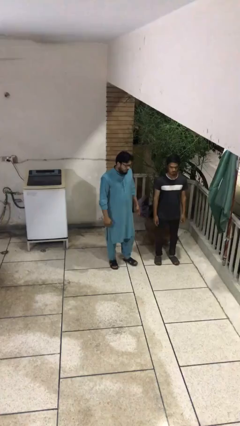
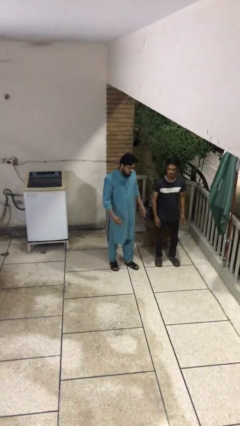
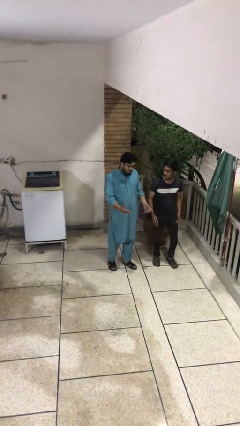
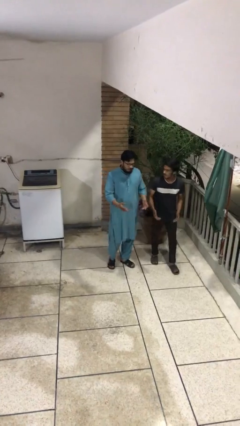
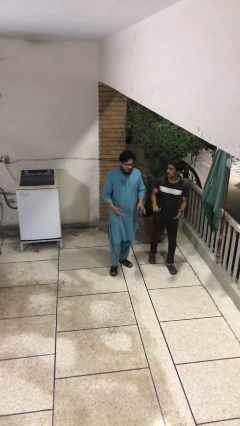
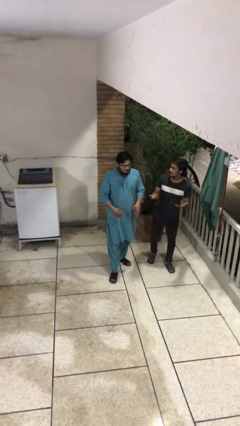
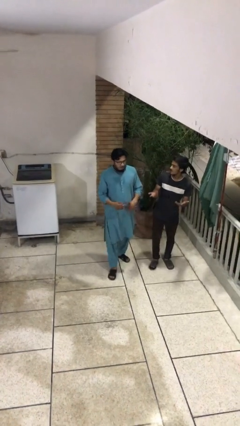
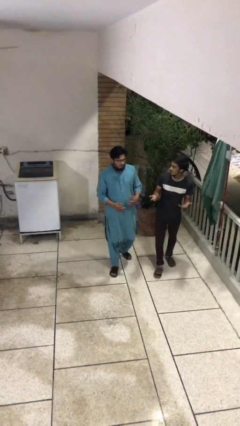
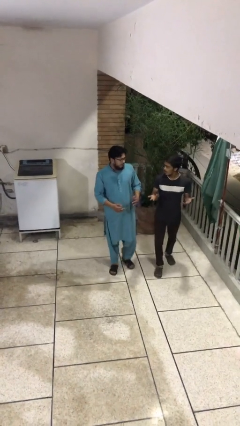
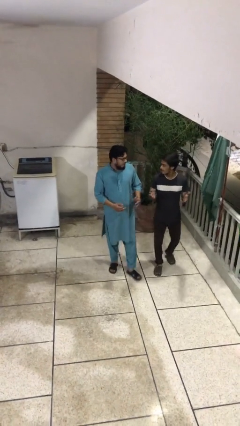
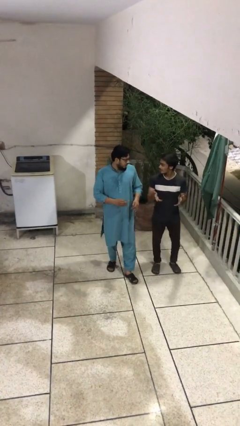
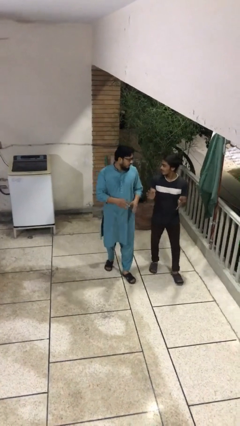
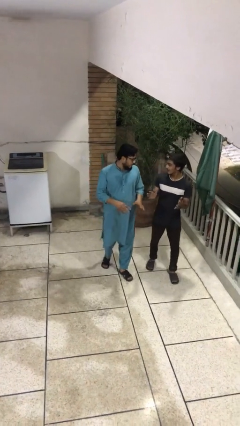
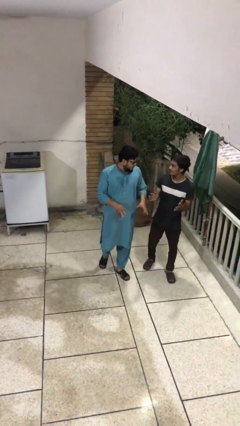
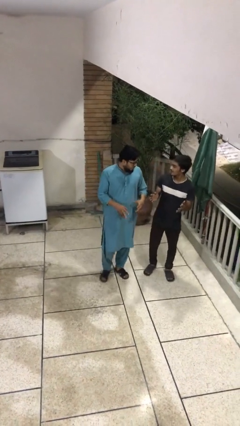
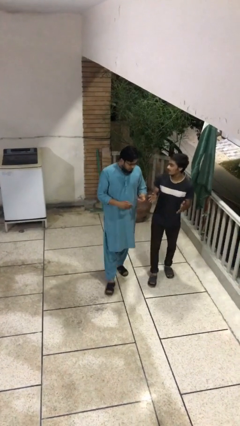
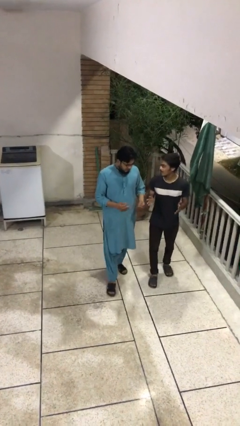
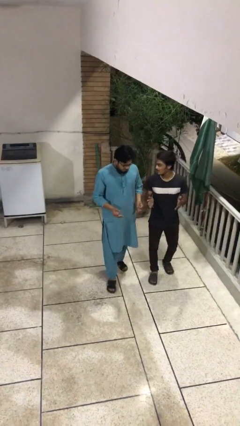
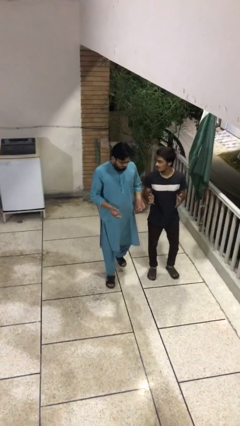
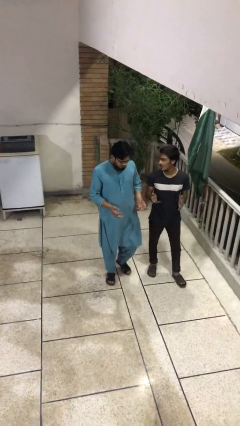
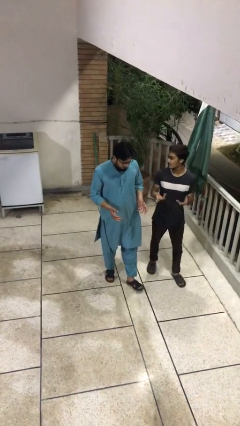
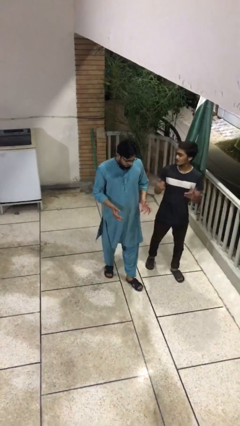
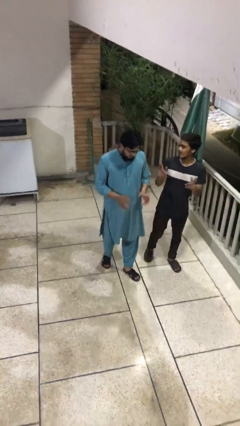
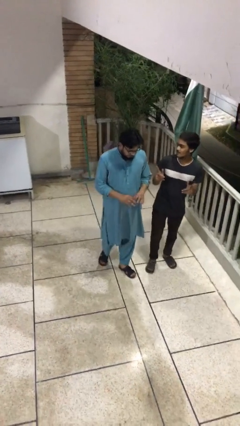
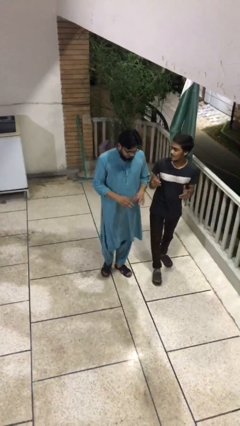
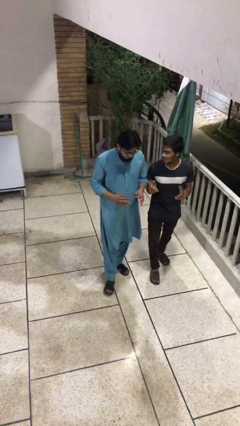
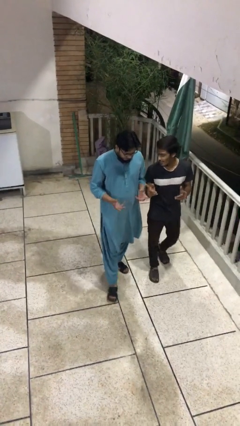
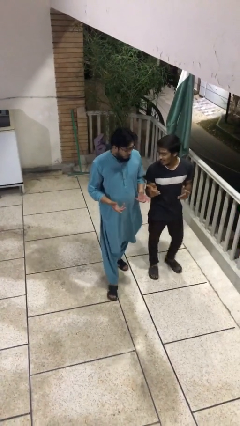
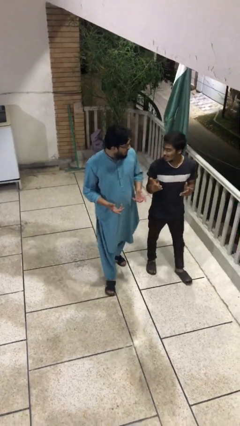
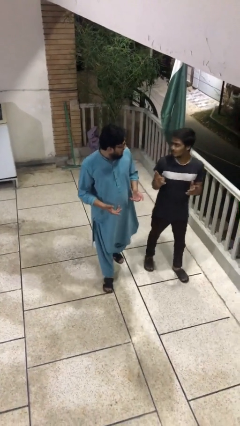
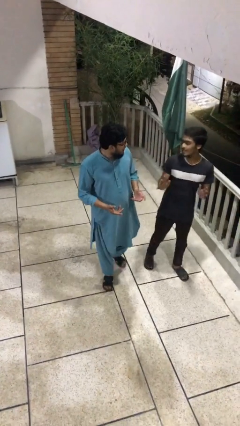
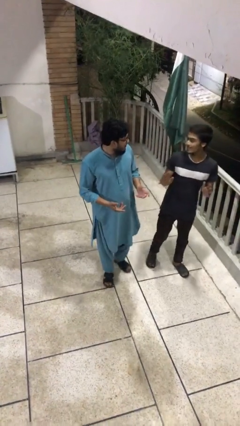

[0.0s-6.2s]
person talks to person

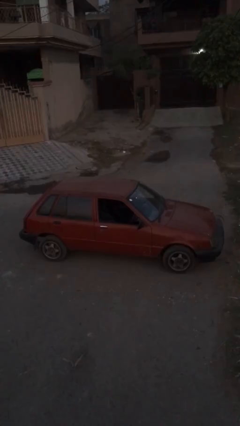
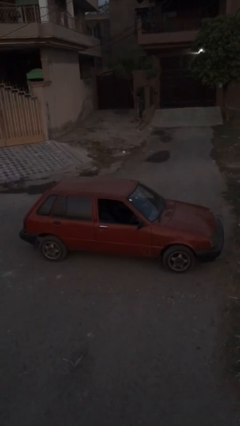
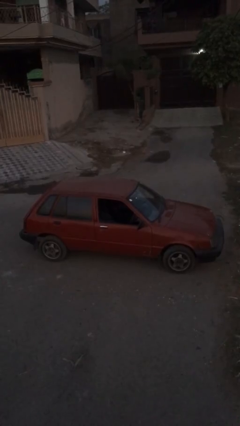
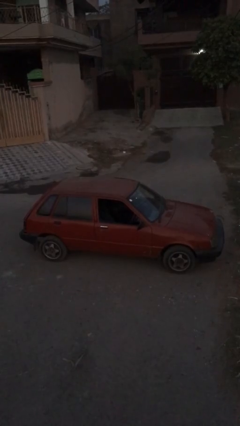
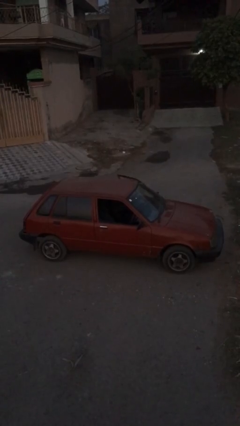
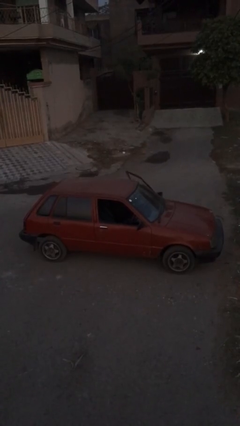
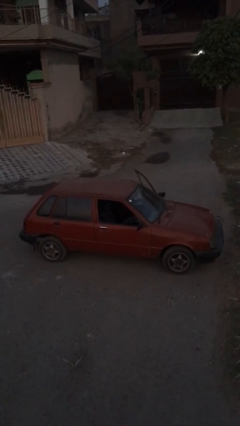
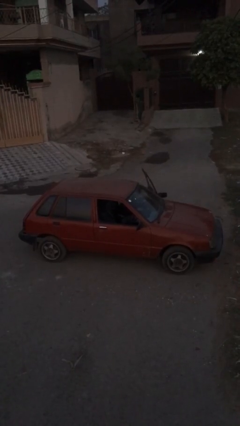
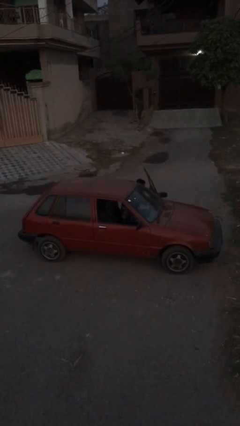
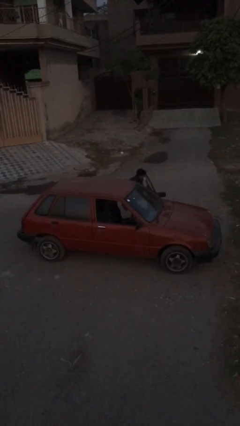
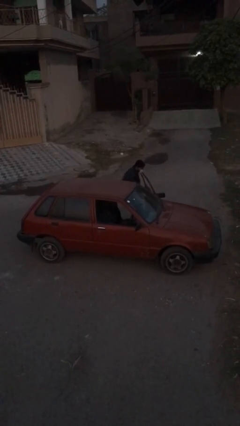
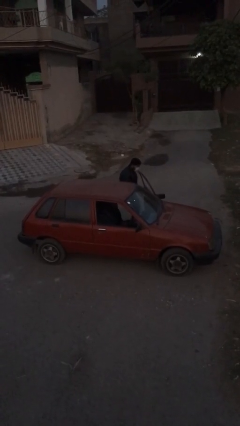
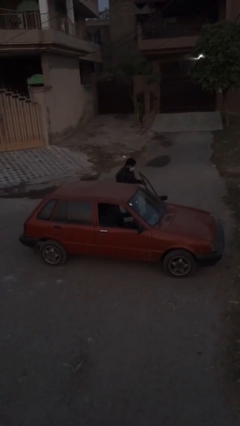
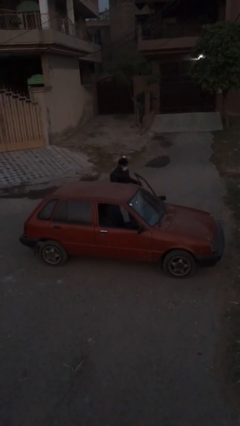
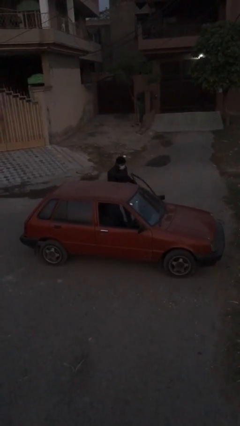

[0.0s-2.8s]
car drops off person

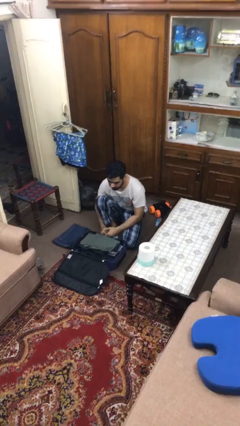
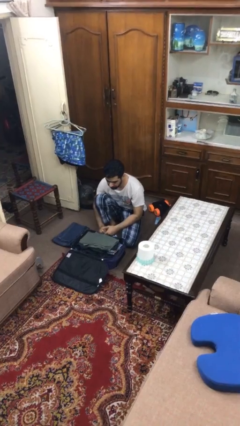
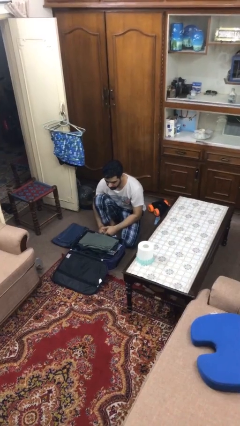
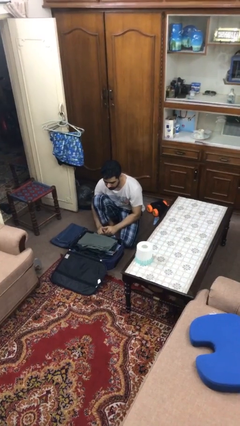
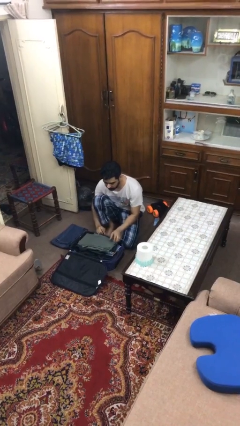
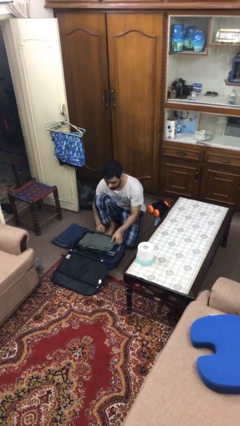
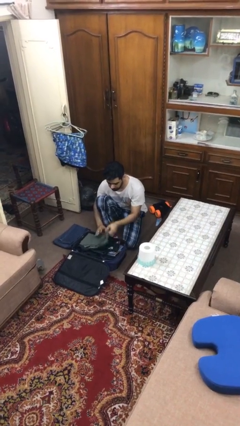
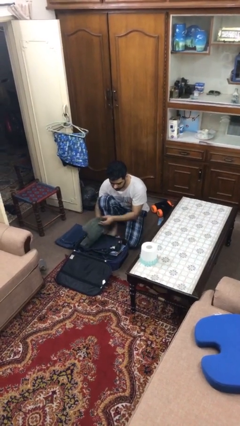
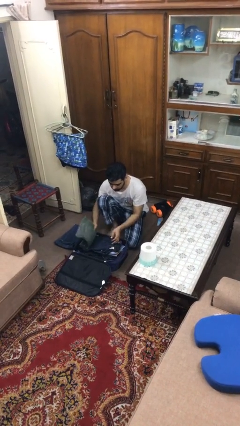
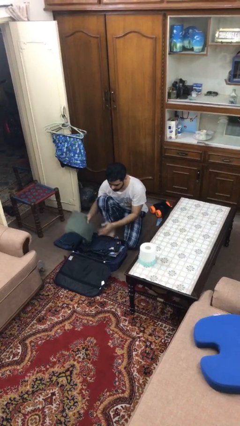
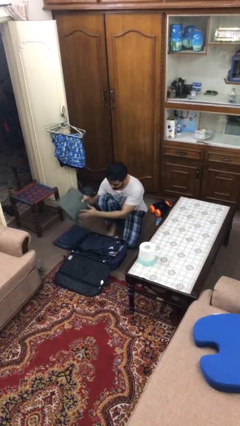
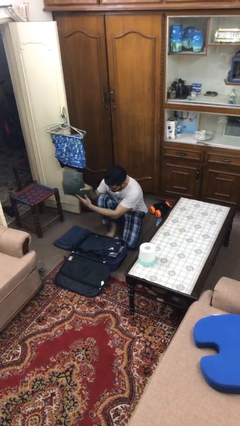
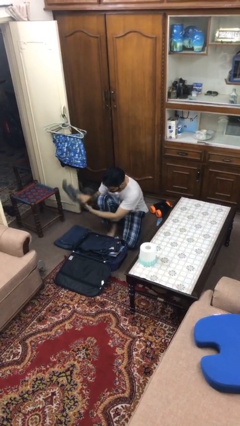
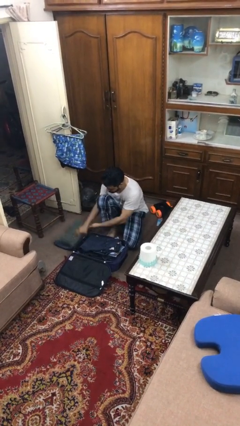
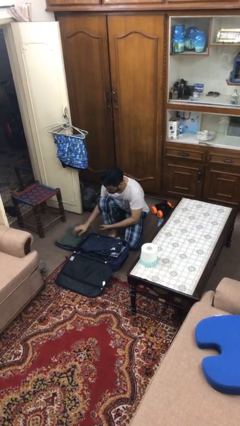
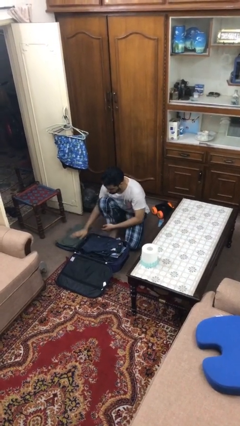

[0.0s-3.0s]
person unloads clothes from suitcase

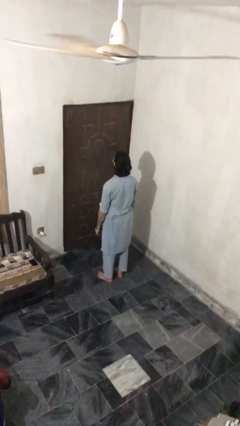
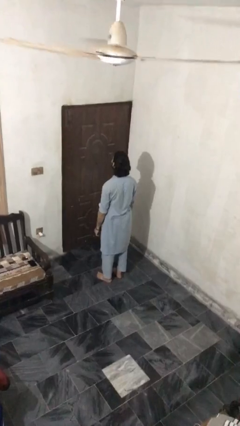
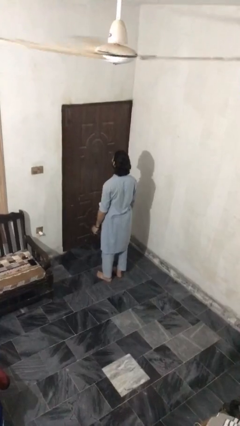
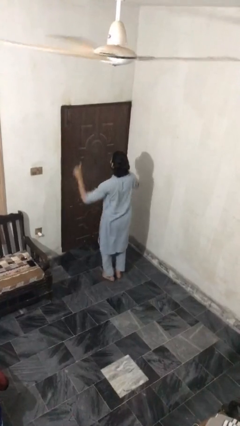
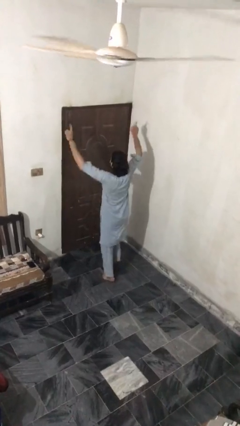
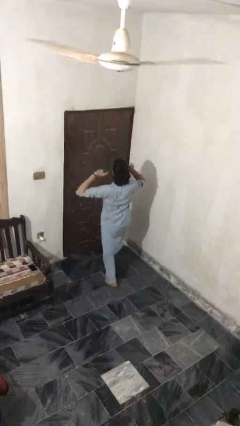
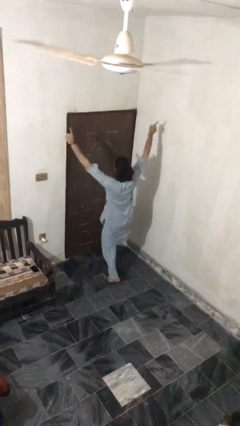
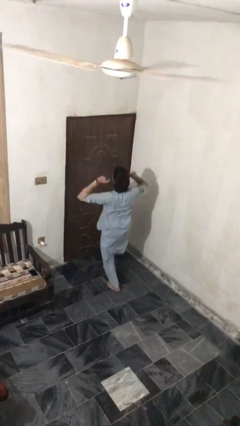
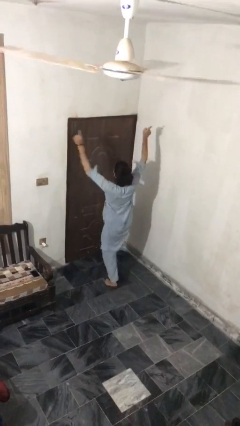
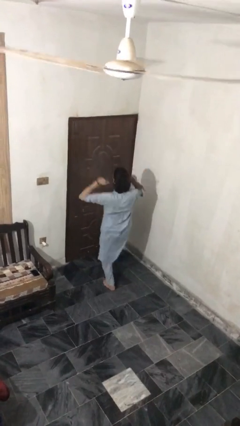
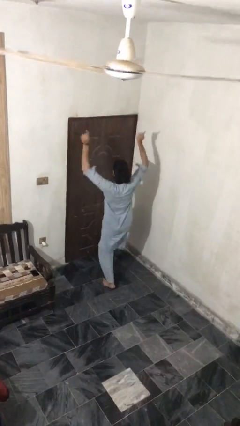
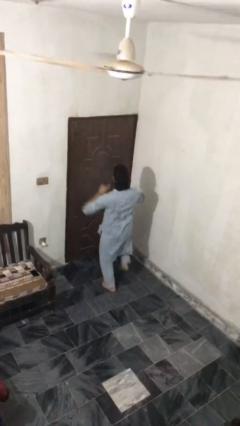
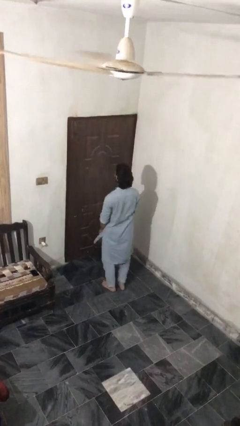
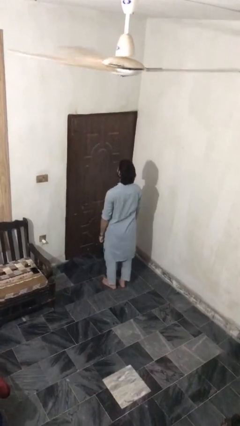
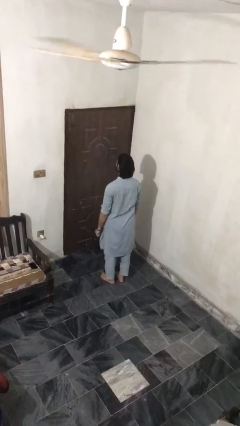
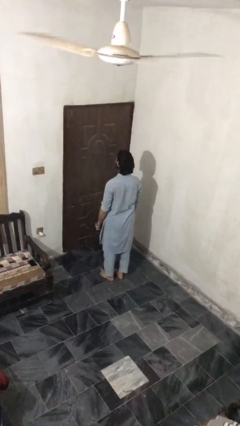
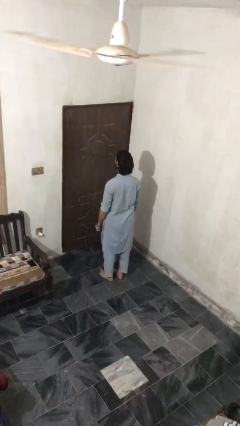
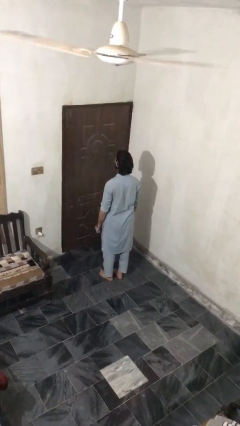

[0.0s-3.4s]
person dances in place

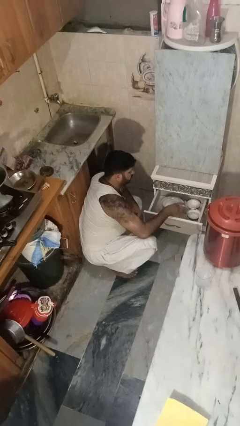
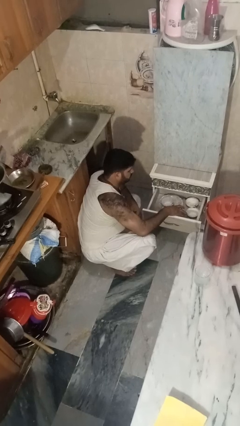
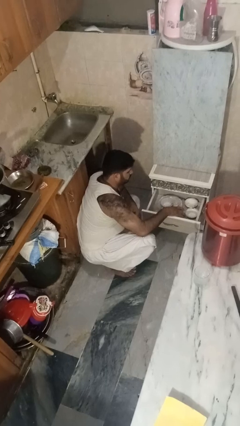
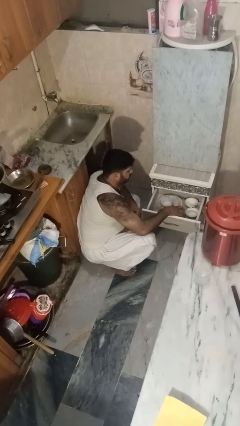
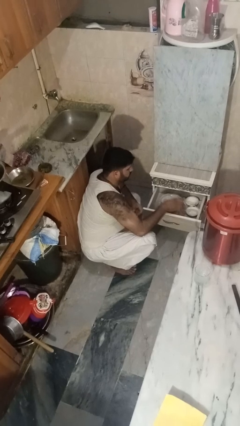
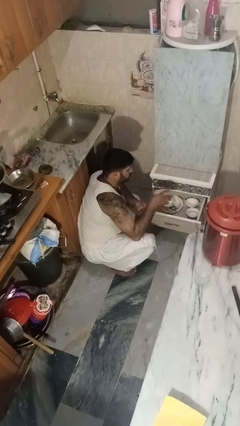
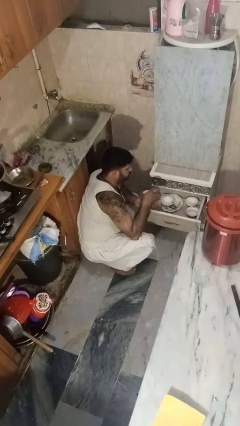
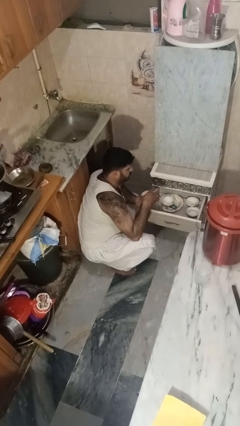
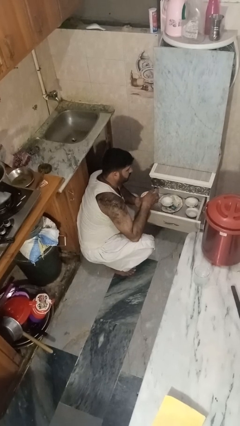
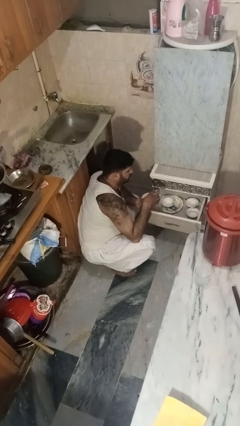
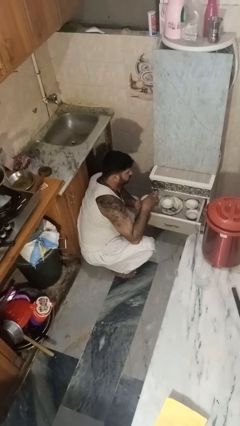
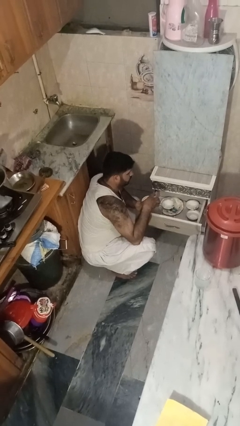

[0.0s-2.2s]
person takes object from kitchen drawer

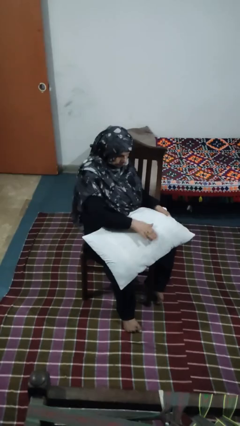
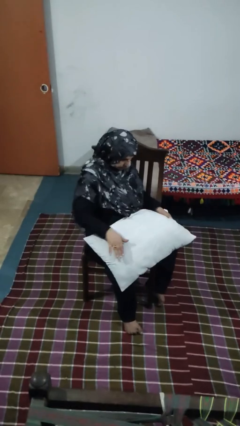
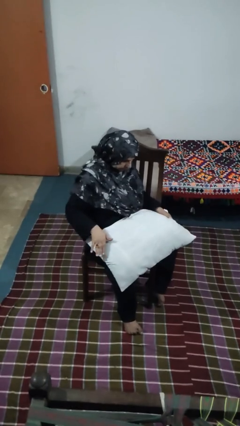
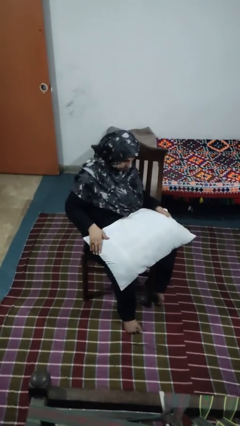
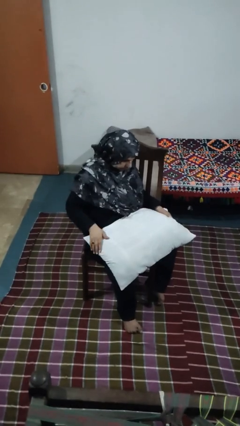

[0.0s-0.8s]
person waves hand over object
